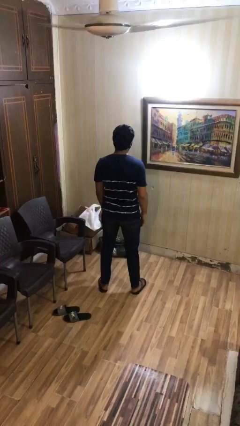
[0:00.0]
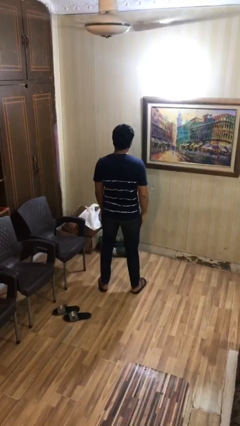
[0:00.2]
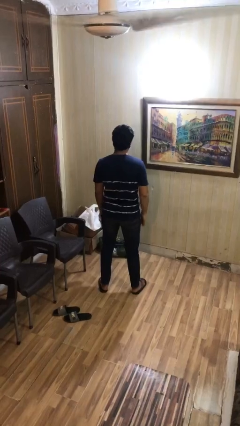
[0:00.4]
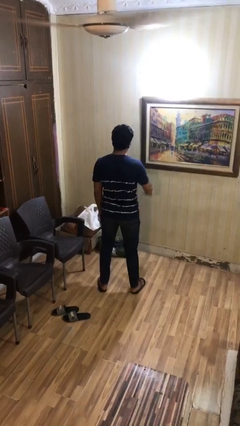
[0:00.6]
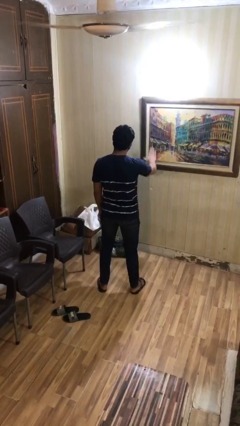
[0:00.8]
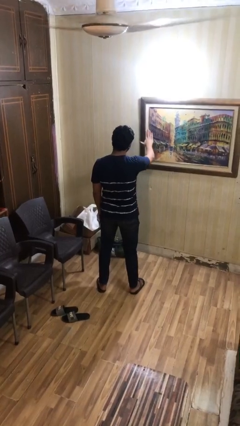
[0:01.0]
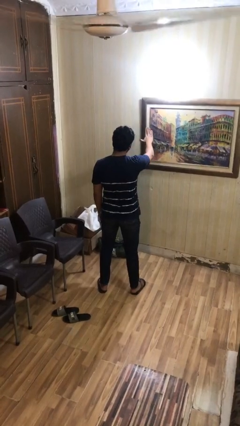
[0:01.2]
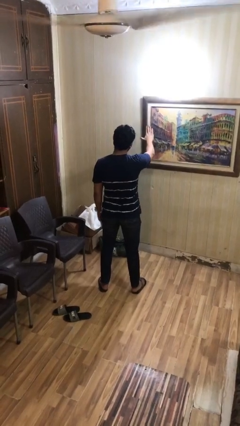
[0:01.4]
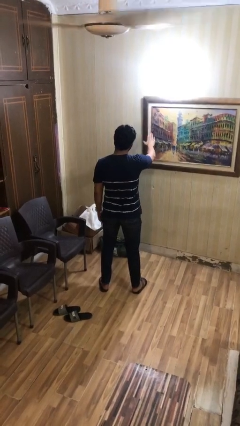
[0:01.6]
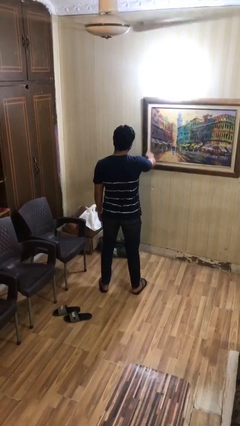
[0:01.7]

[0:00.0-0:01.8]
person gestures stop

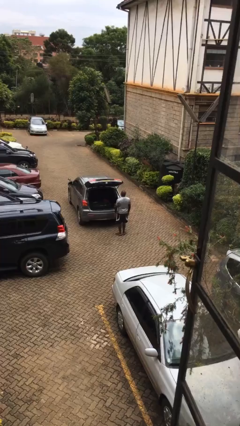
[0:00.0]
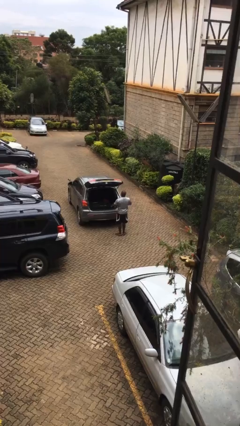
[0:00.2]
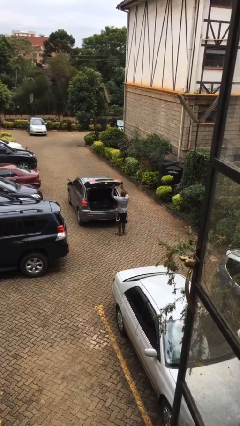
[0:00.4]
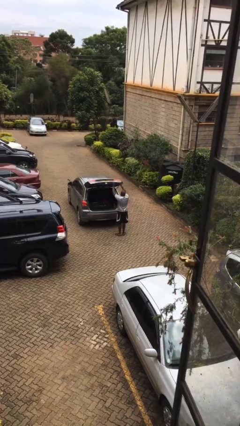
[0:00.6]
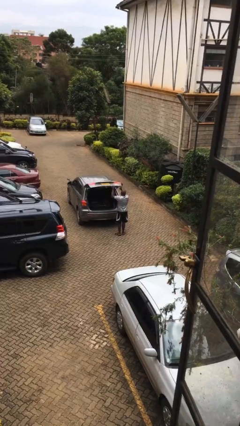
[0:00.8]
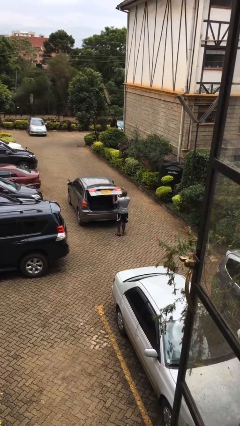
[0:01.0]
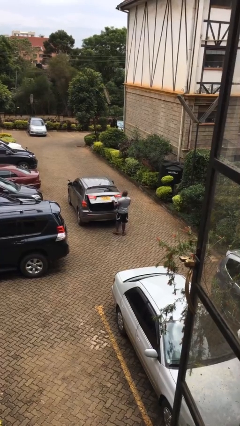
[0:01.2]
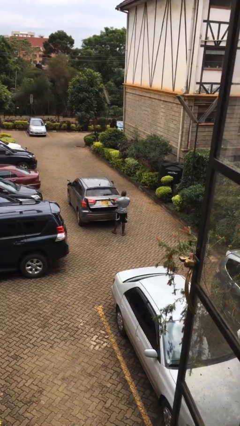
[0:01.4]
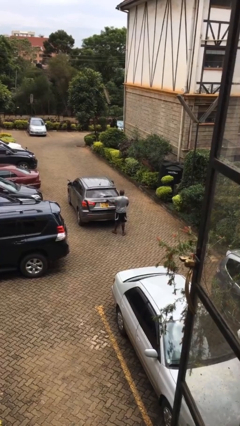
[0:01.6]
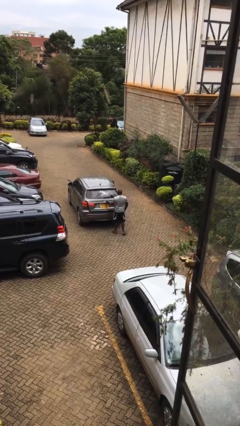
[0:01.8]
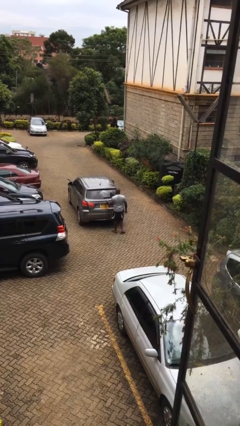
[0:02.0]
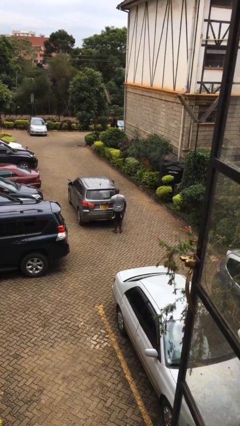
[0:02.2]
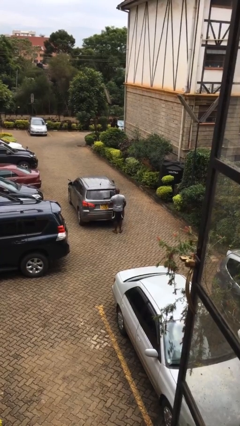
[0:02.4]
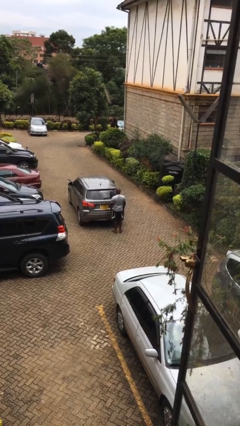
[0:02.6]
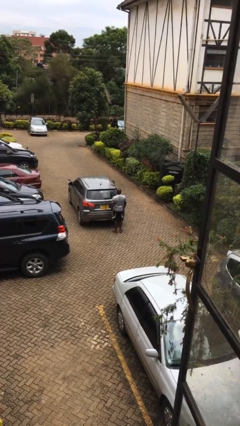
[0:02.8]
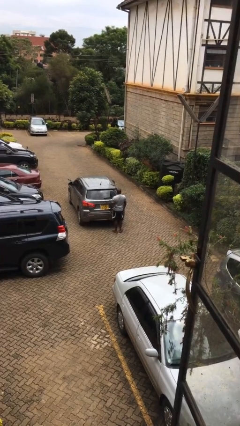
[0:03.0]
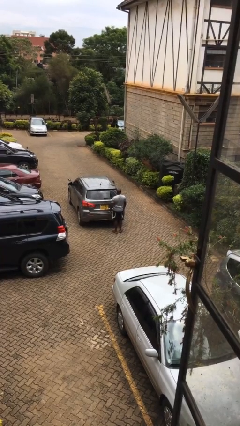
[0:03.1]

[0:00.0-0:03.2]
person closes car trunk

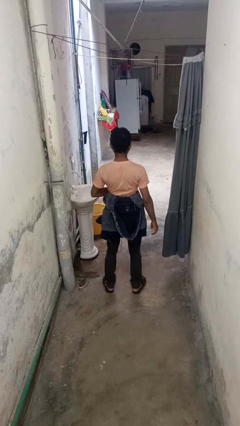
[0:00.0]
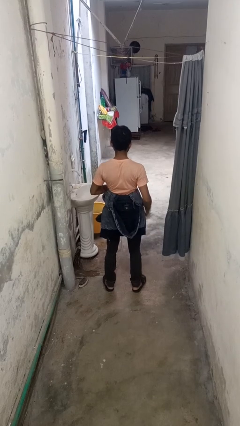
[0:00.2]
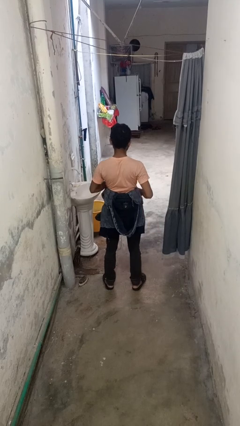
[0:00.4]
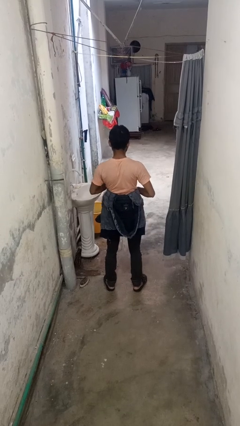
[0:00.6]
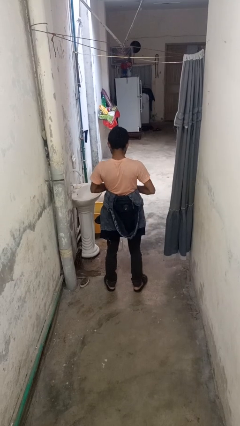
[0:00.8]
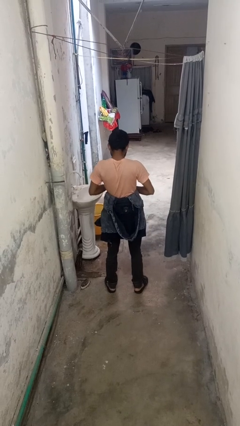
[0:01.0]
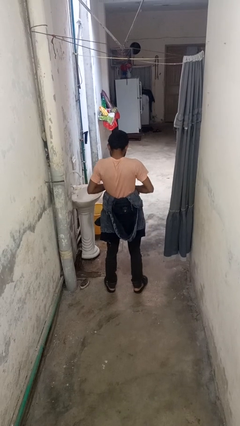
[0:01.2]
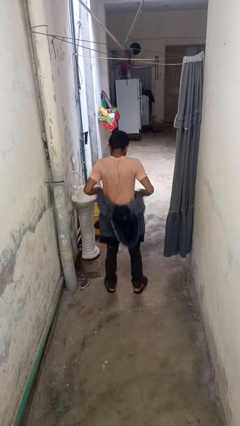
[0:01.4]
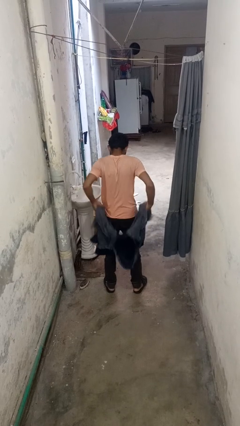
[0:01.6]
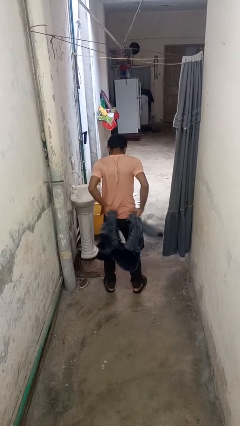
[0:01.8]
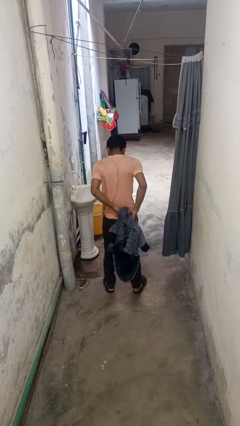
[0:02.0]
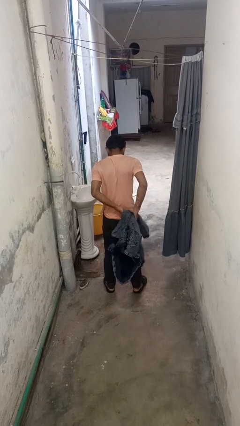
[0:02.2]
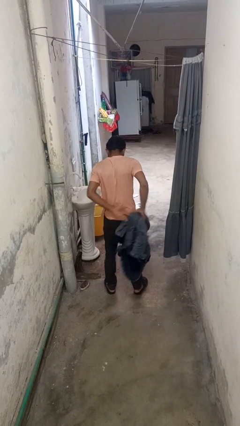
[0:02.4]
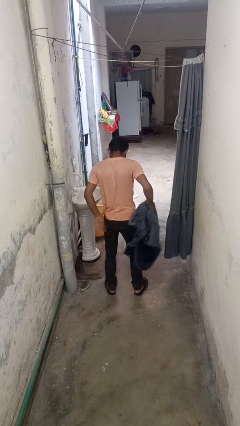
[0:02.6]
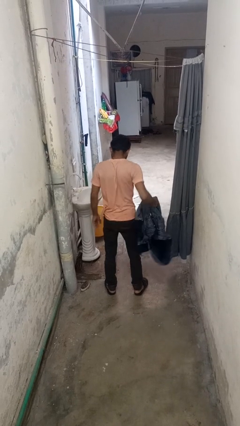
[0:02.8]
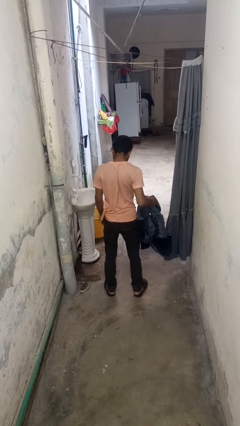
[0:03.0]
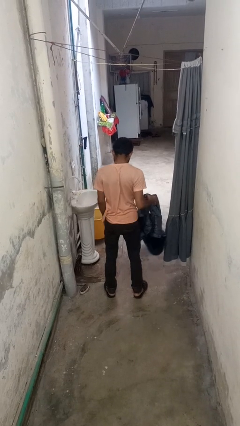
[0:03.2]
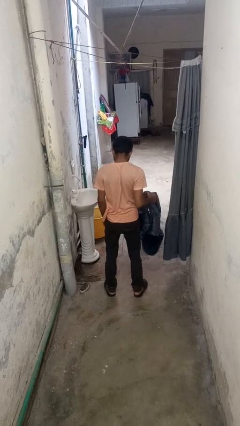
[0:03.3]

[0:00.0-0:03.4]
person unties jacket around waist

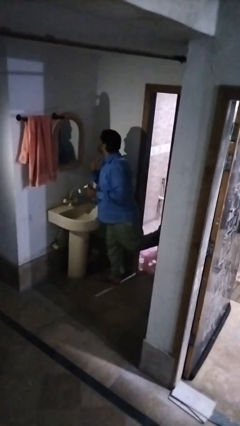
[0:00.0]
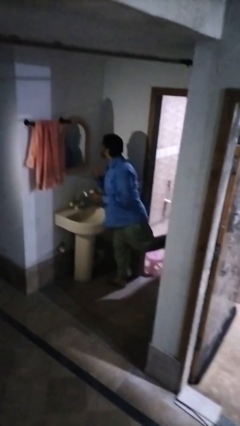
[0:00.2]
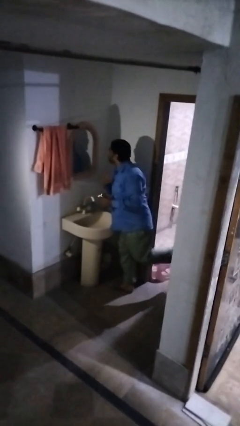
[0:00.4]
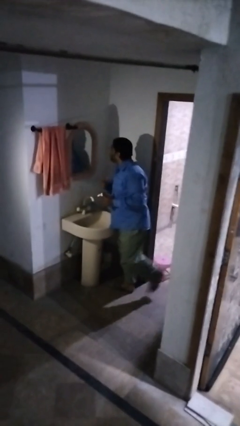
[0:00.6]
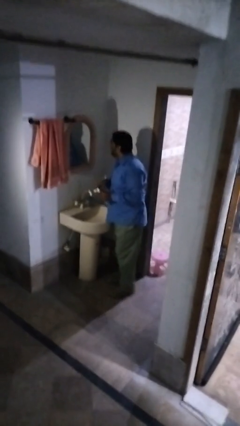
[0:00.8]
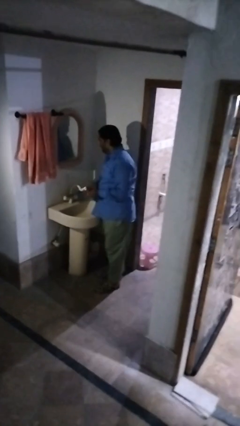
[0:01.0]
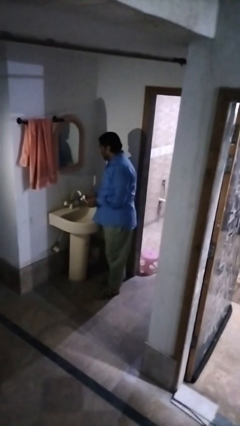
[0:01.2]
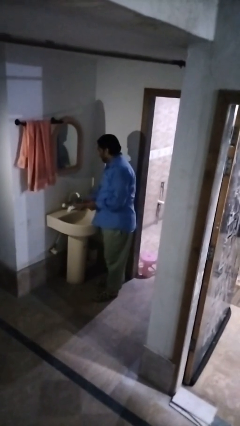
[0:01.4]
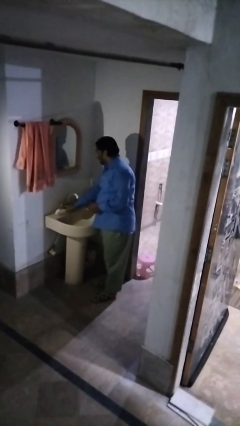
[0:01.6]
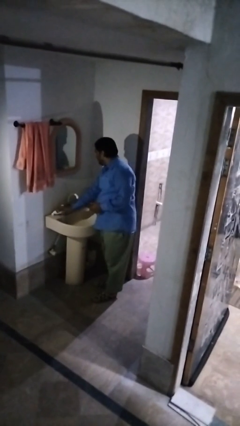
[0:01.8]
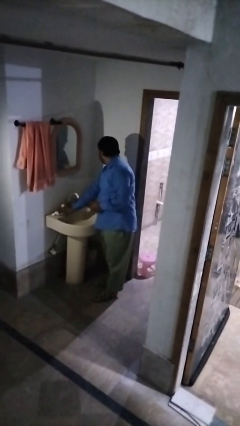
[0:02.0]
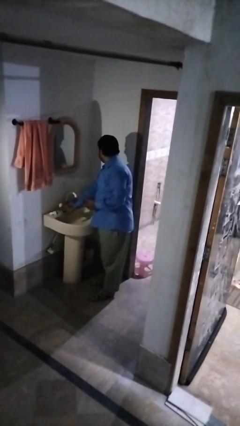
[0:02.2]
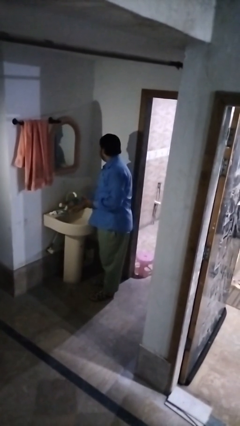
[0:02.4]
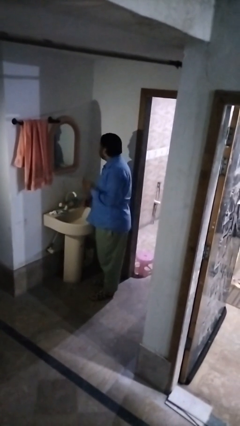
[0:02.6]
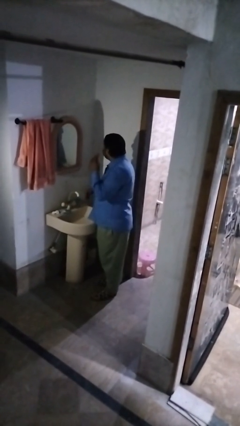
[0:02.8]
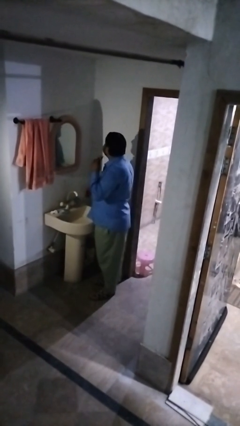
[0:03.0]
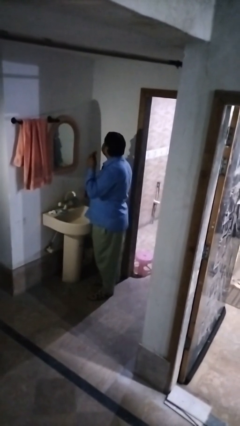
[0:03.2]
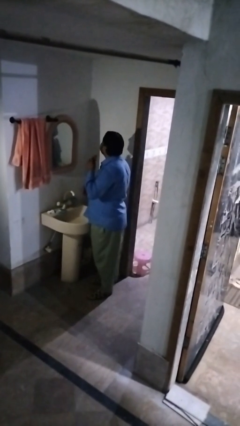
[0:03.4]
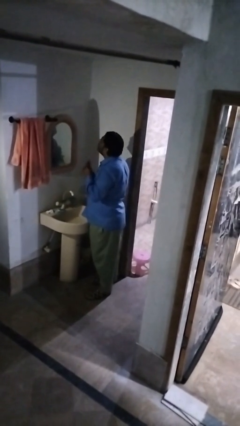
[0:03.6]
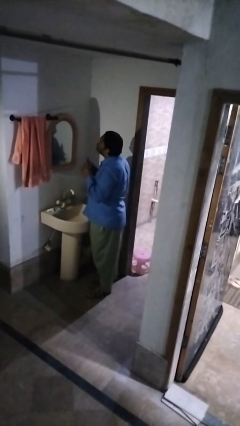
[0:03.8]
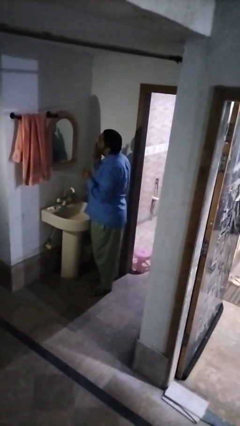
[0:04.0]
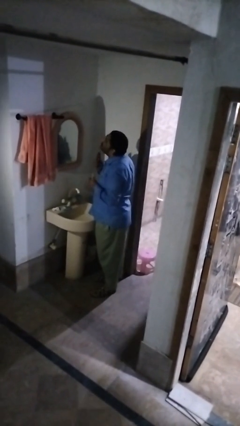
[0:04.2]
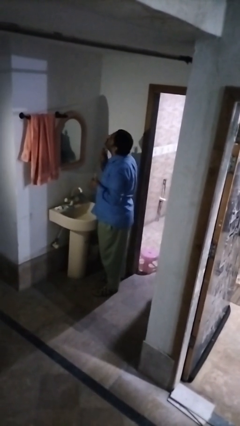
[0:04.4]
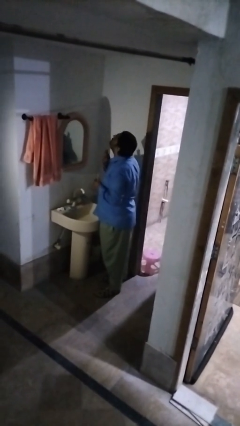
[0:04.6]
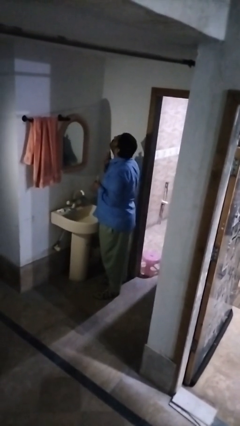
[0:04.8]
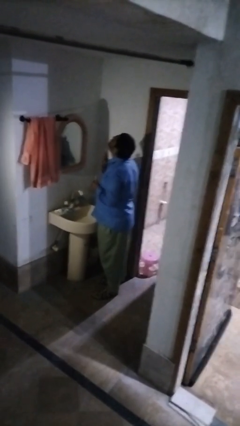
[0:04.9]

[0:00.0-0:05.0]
person shaves face

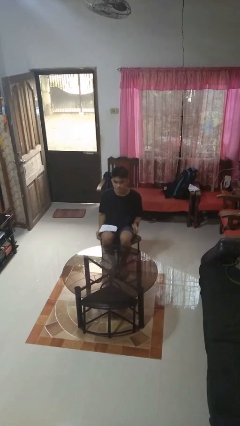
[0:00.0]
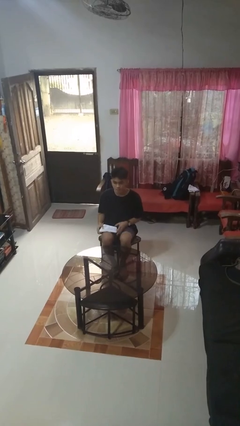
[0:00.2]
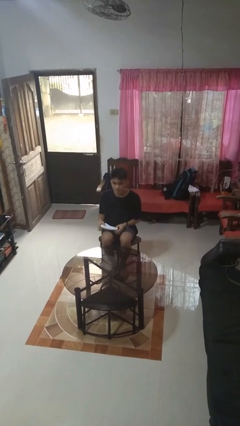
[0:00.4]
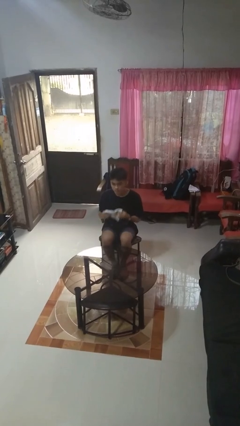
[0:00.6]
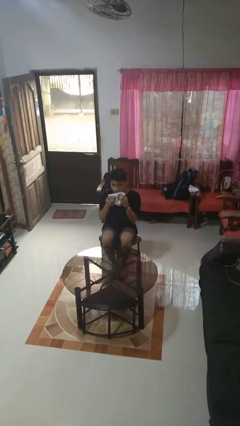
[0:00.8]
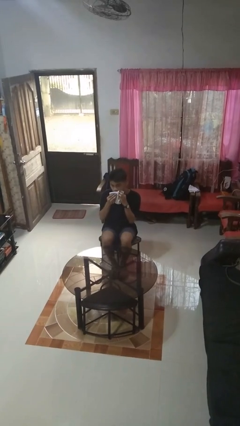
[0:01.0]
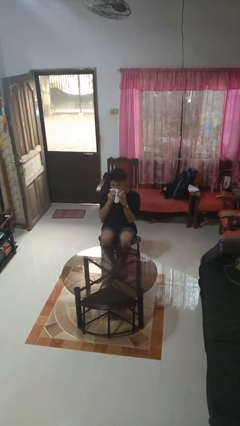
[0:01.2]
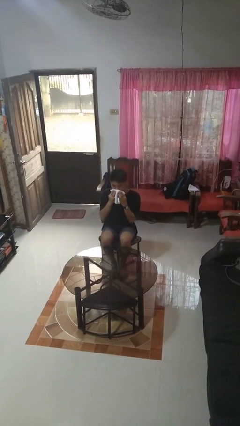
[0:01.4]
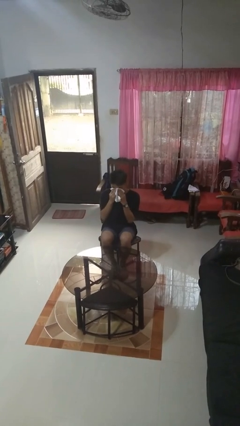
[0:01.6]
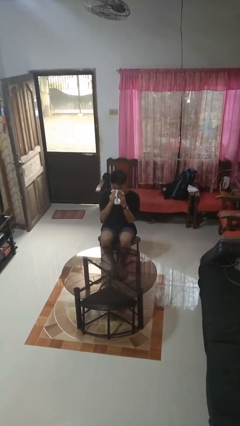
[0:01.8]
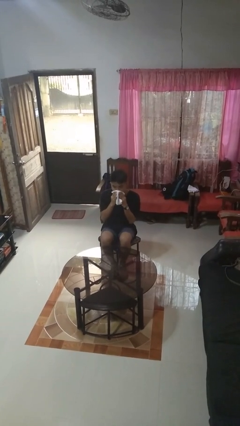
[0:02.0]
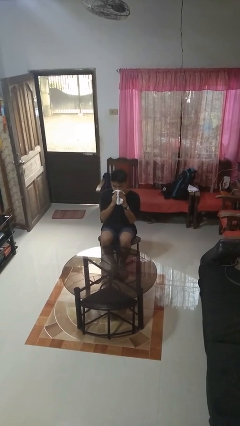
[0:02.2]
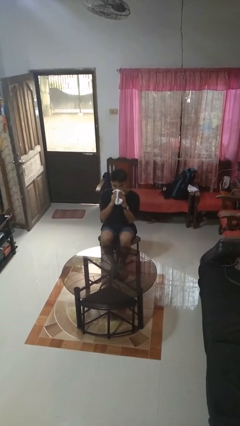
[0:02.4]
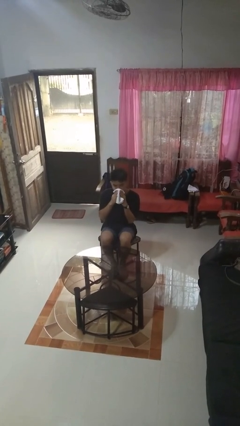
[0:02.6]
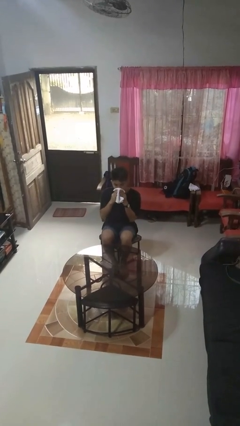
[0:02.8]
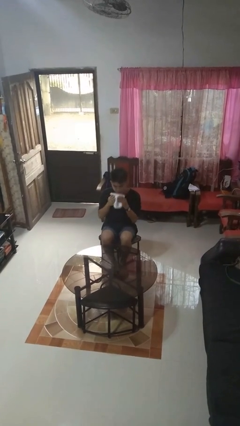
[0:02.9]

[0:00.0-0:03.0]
person wipes mouth with napkin

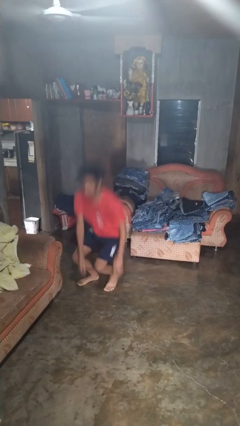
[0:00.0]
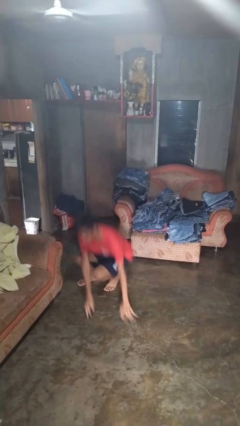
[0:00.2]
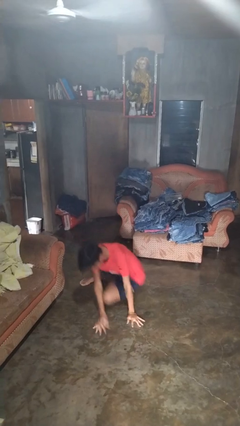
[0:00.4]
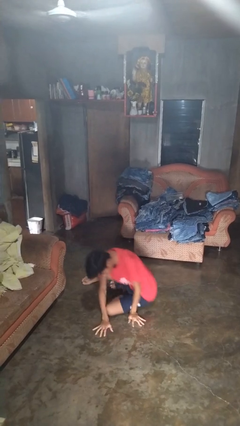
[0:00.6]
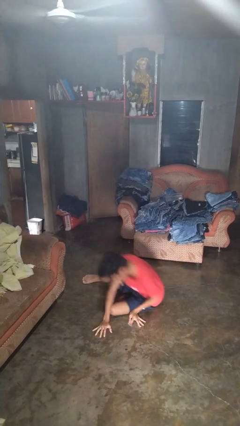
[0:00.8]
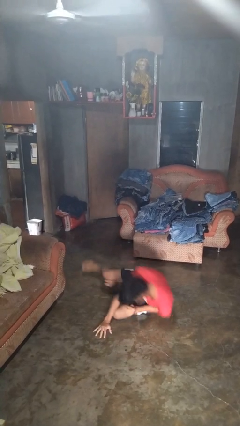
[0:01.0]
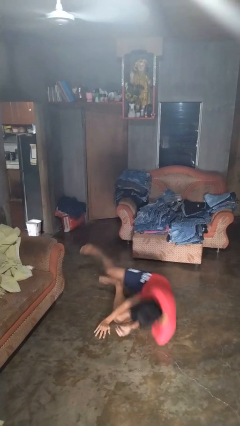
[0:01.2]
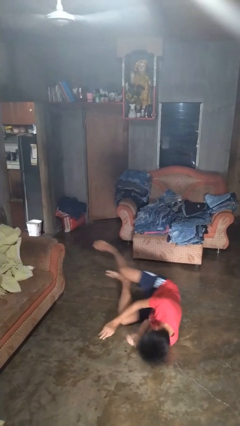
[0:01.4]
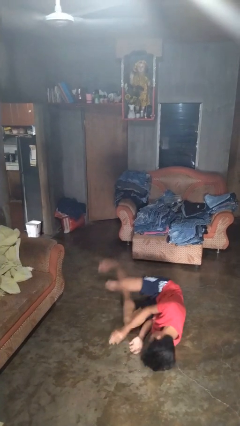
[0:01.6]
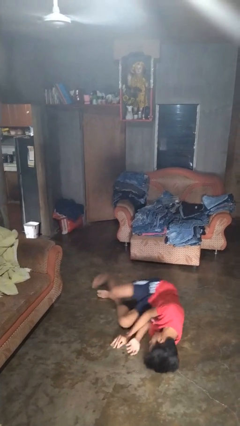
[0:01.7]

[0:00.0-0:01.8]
person falls while standing
